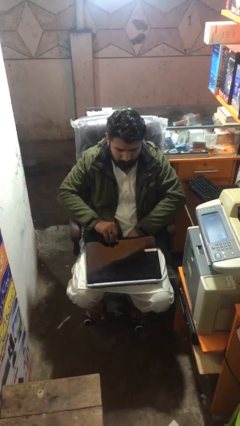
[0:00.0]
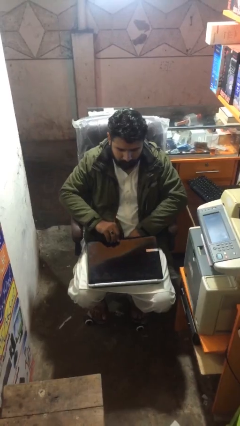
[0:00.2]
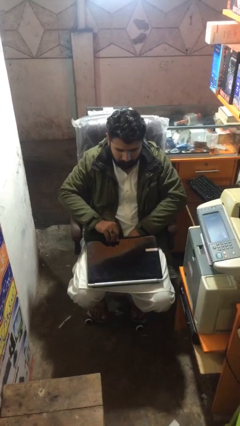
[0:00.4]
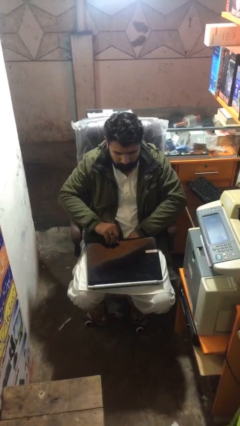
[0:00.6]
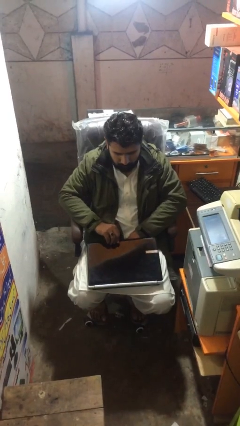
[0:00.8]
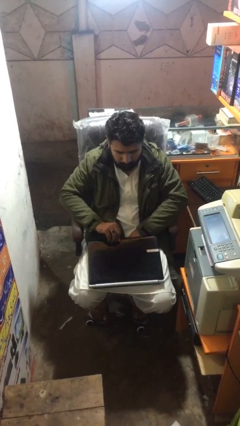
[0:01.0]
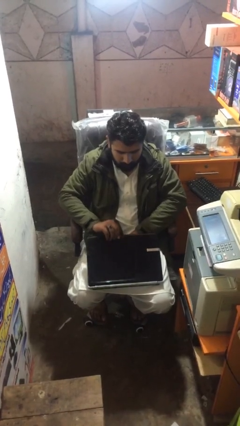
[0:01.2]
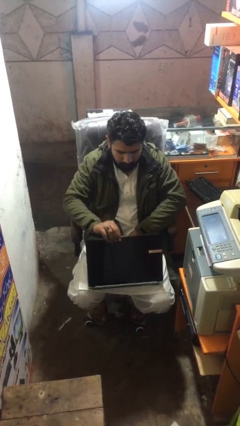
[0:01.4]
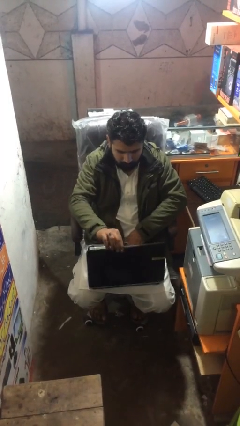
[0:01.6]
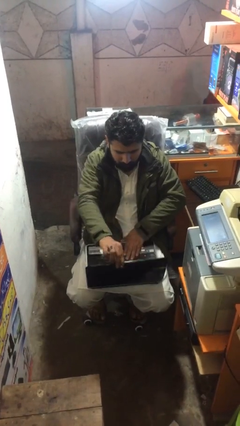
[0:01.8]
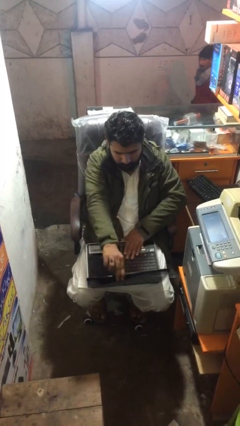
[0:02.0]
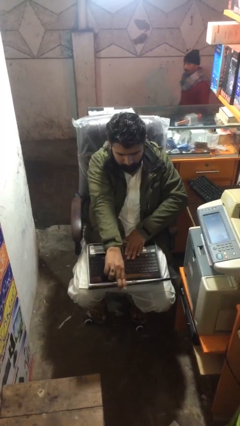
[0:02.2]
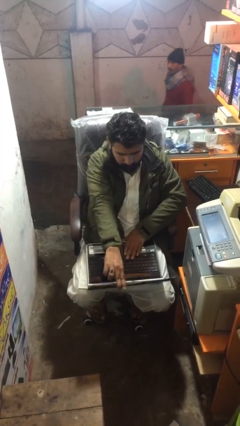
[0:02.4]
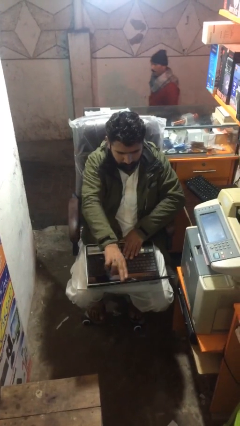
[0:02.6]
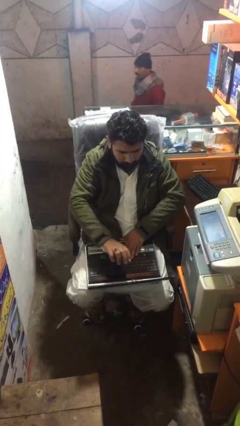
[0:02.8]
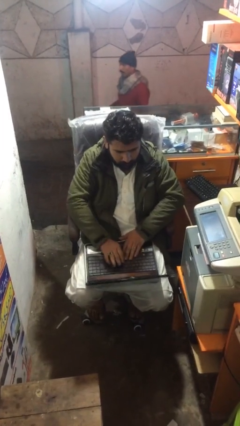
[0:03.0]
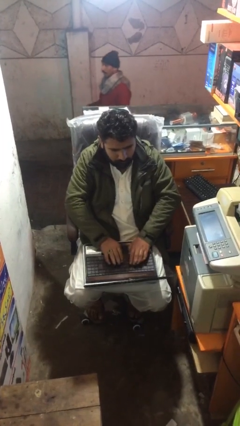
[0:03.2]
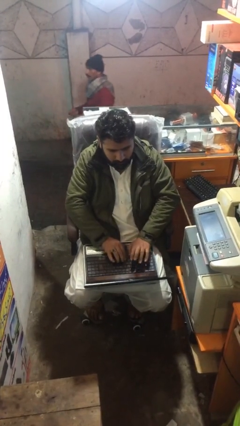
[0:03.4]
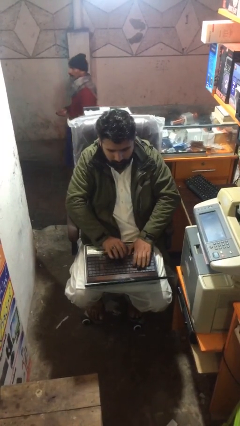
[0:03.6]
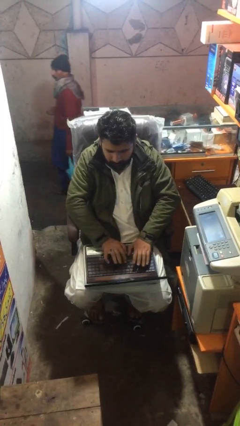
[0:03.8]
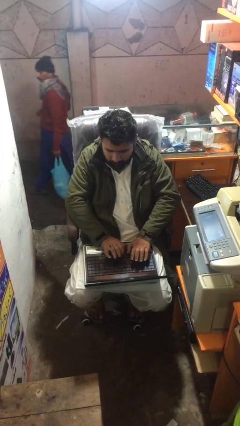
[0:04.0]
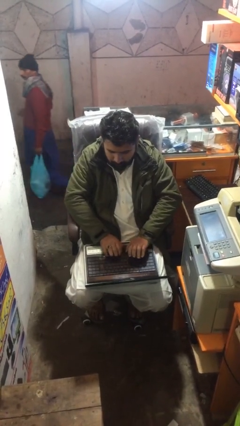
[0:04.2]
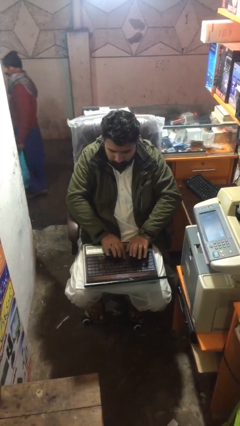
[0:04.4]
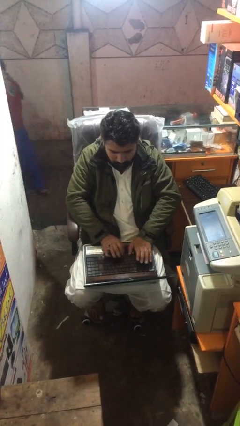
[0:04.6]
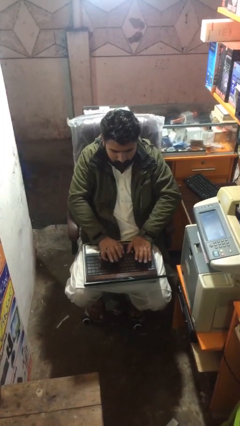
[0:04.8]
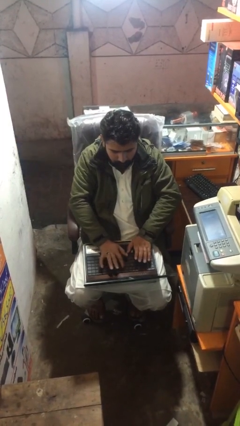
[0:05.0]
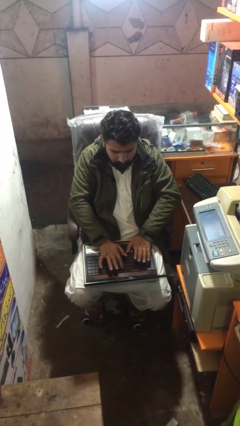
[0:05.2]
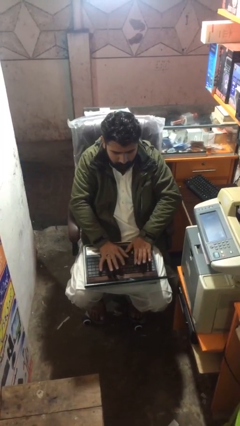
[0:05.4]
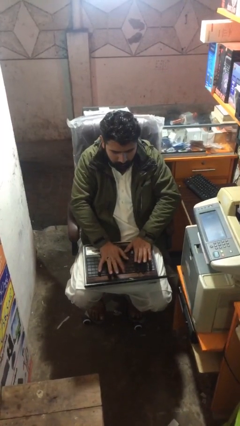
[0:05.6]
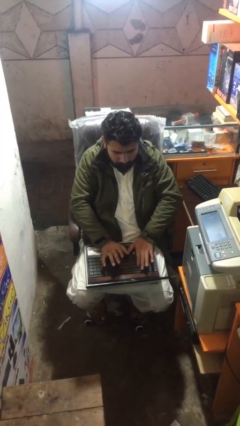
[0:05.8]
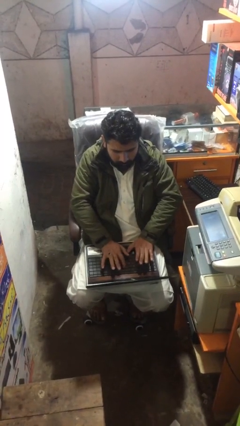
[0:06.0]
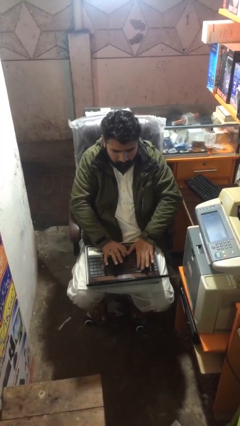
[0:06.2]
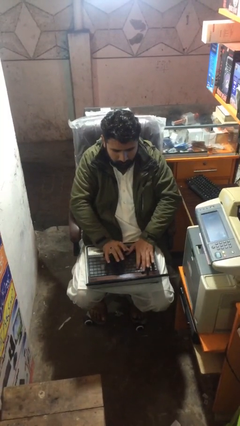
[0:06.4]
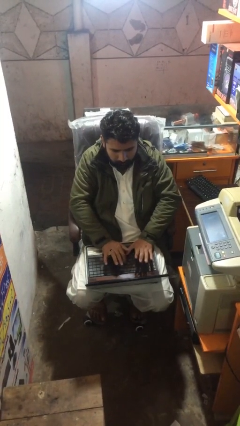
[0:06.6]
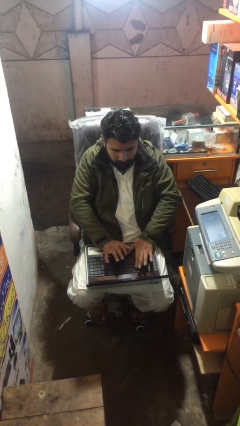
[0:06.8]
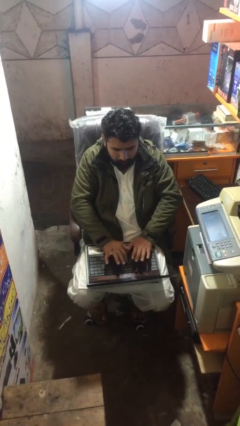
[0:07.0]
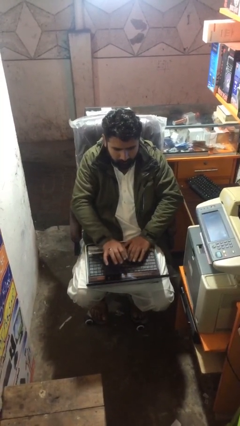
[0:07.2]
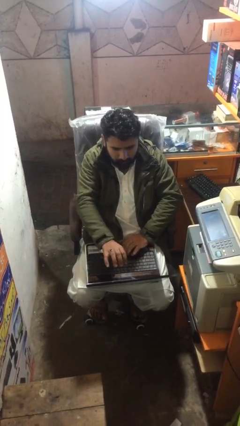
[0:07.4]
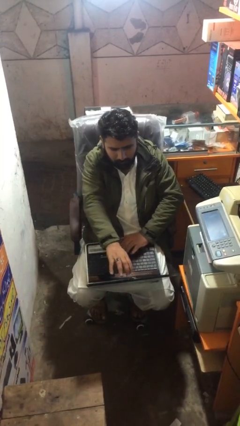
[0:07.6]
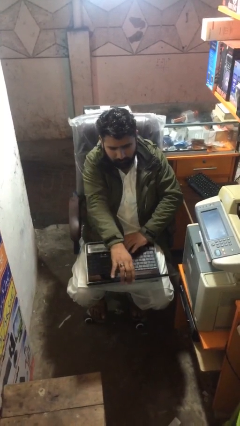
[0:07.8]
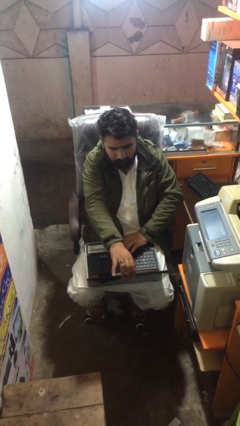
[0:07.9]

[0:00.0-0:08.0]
person interacts with laptop

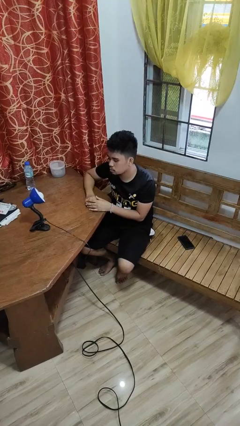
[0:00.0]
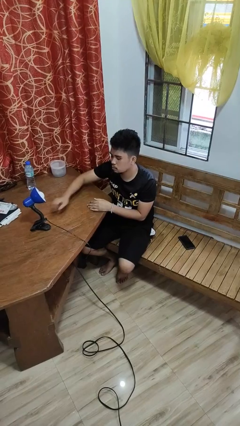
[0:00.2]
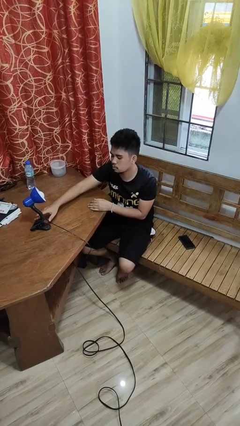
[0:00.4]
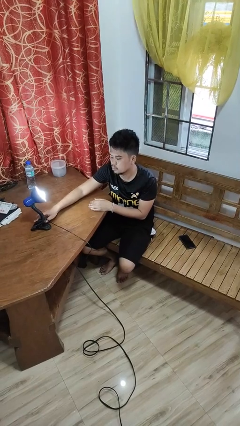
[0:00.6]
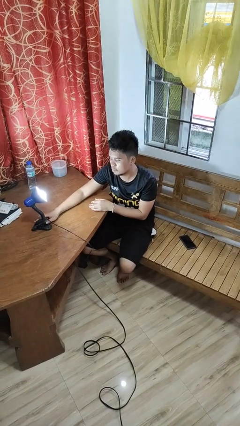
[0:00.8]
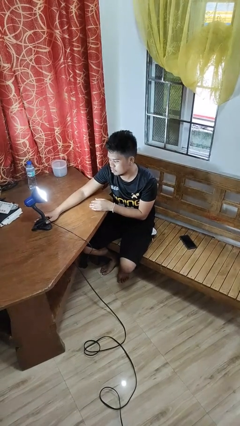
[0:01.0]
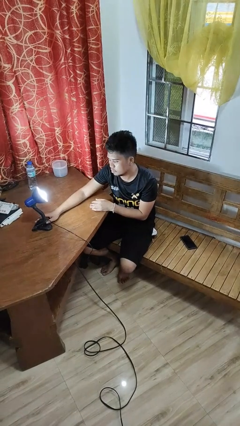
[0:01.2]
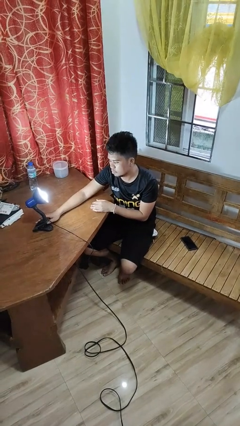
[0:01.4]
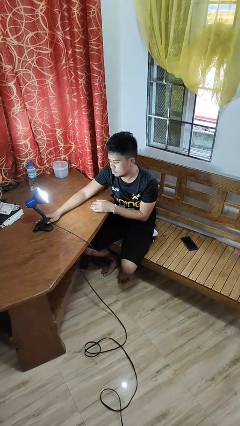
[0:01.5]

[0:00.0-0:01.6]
person turns on lamp

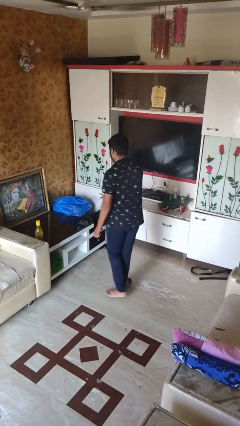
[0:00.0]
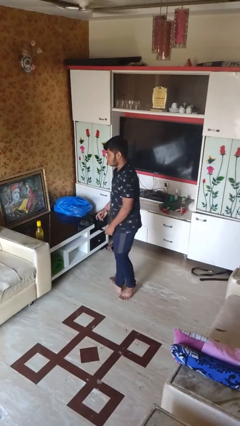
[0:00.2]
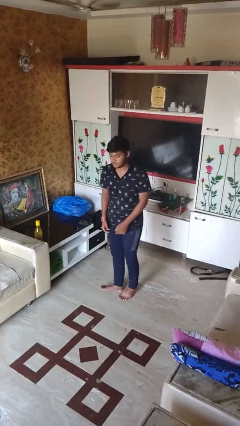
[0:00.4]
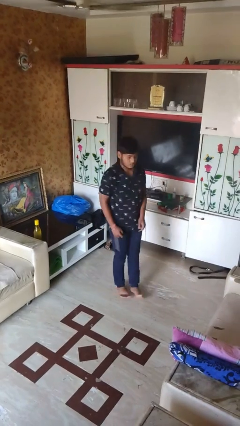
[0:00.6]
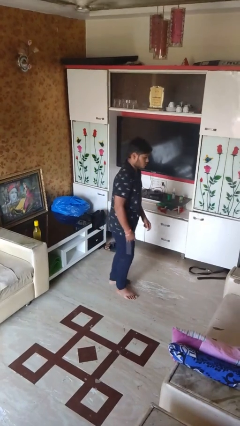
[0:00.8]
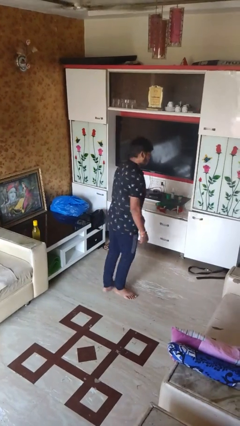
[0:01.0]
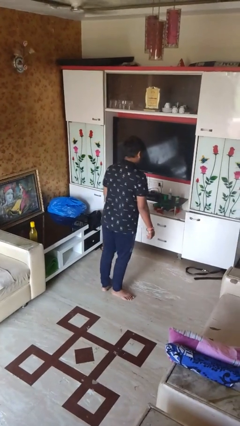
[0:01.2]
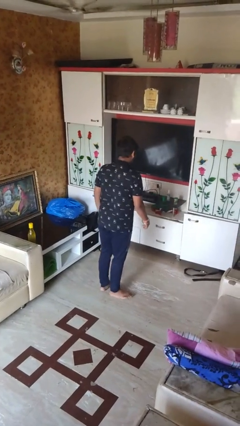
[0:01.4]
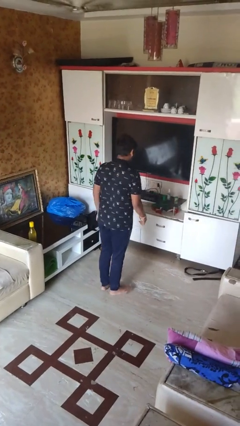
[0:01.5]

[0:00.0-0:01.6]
person twirls

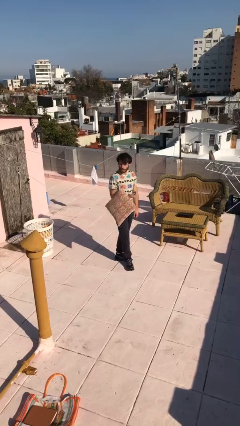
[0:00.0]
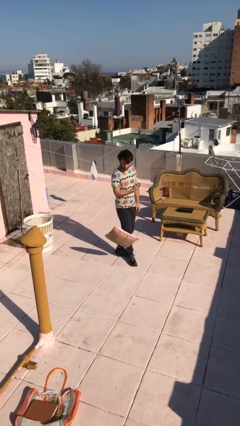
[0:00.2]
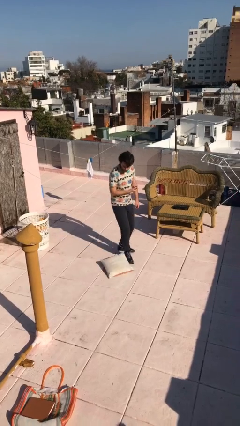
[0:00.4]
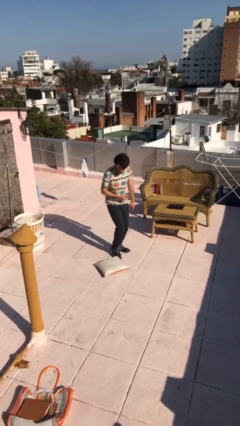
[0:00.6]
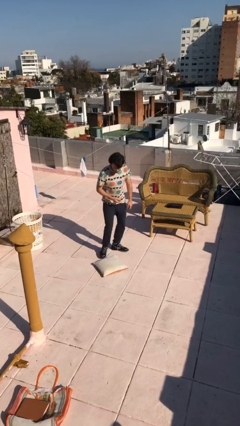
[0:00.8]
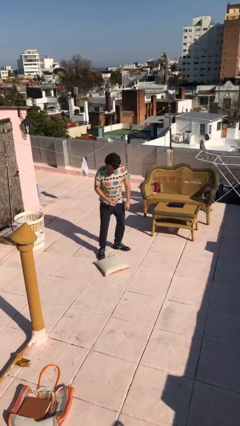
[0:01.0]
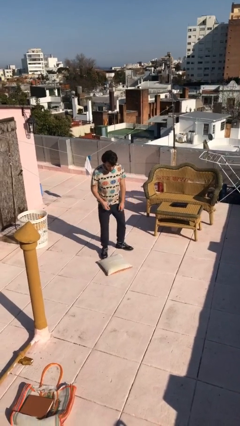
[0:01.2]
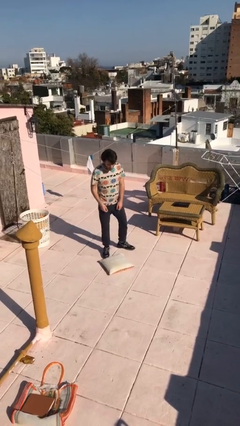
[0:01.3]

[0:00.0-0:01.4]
person drops object

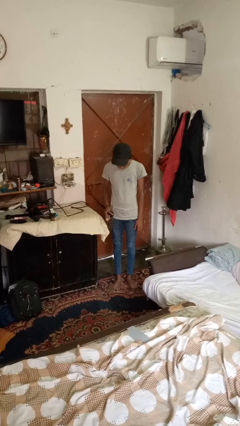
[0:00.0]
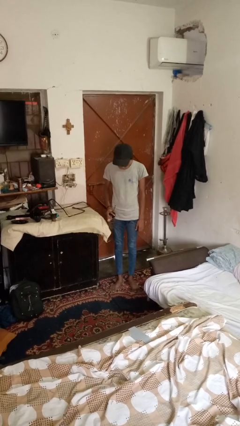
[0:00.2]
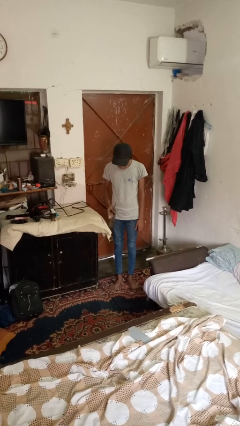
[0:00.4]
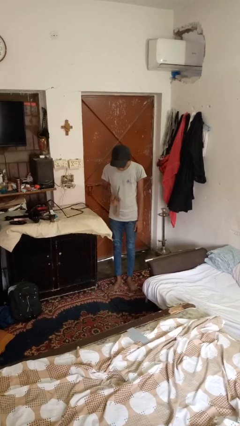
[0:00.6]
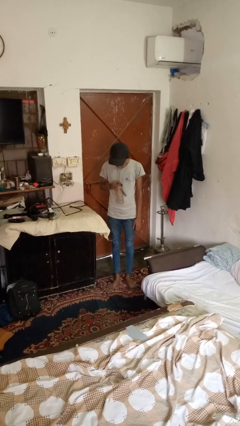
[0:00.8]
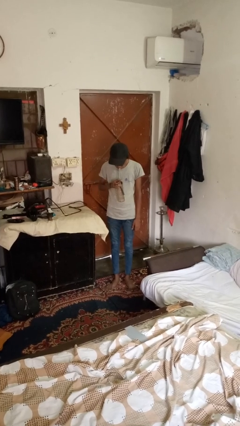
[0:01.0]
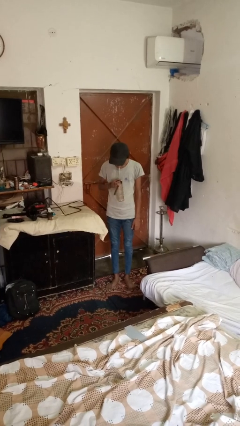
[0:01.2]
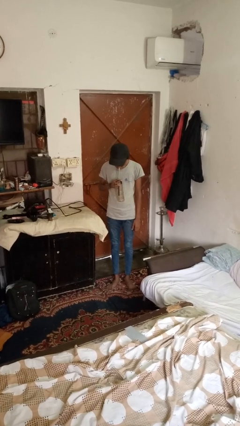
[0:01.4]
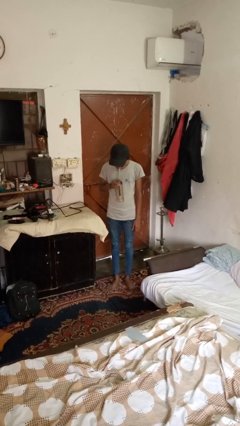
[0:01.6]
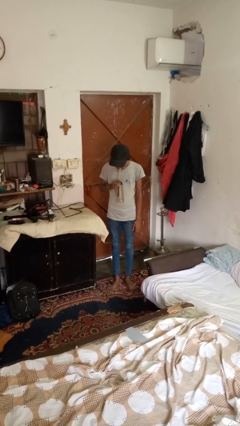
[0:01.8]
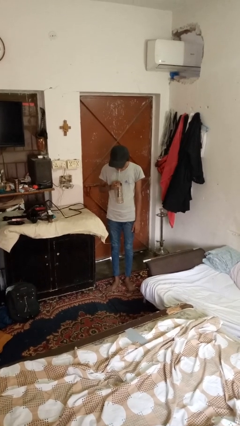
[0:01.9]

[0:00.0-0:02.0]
person drinks from straw

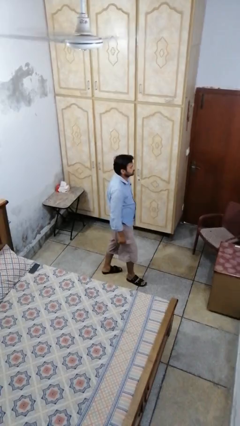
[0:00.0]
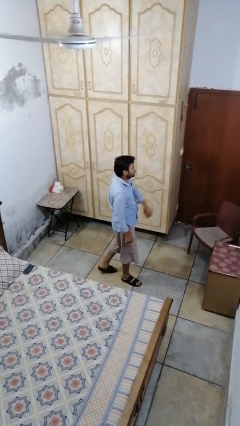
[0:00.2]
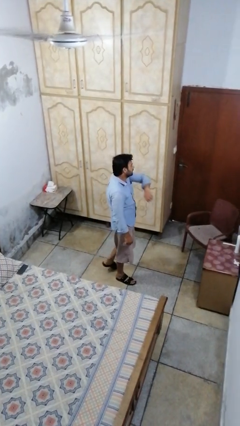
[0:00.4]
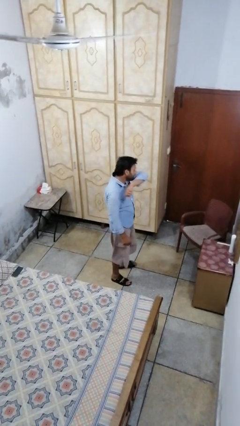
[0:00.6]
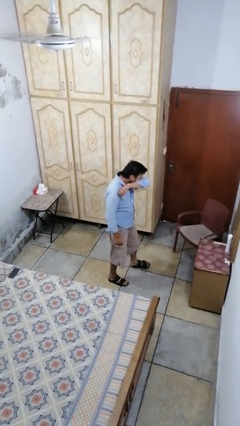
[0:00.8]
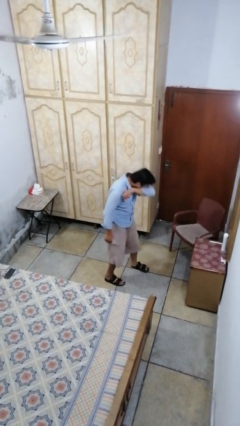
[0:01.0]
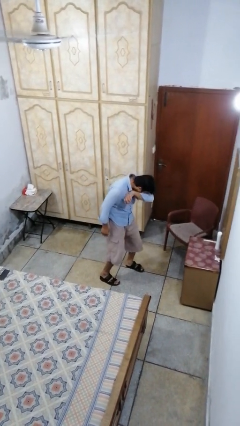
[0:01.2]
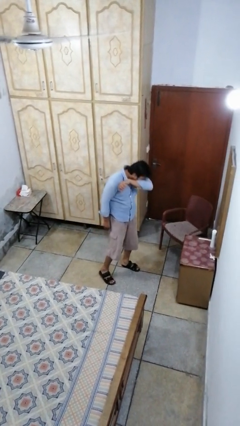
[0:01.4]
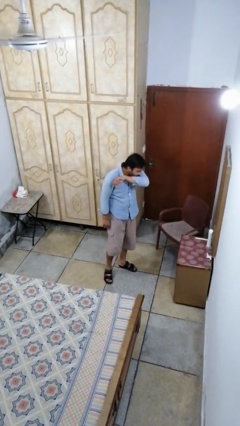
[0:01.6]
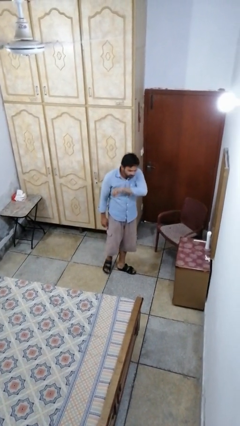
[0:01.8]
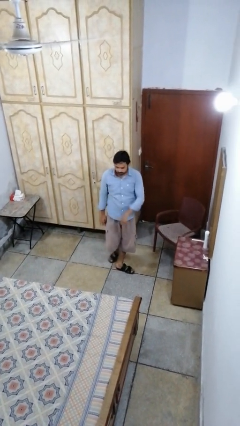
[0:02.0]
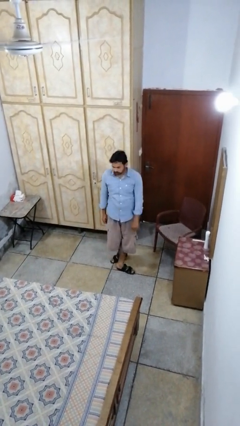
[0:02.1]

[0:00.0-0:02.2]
person sneezes into arm

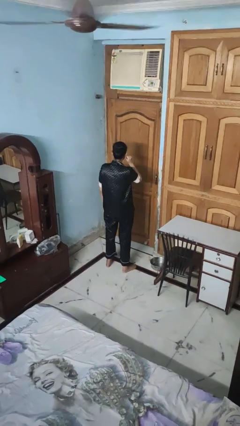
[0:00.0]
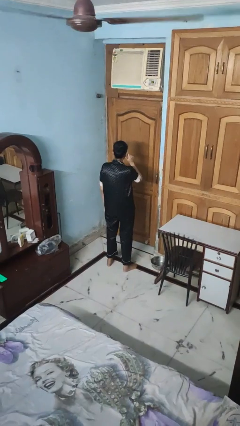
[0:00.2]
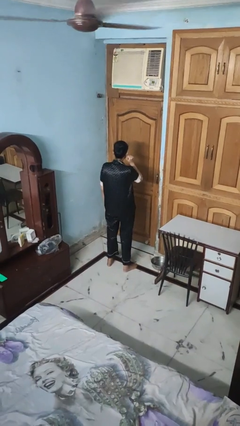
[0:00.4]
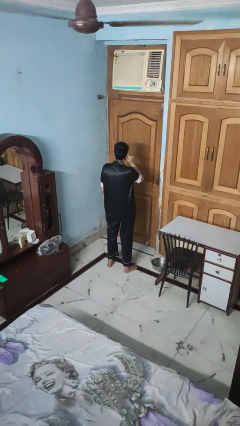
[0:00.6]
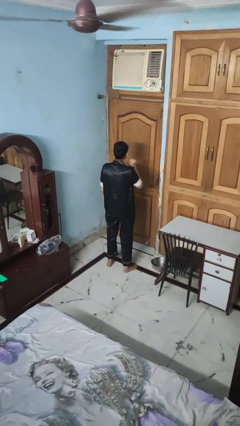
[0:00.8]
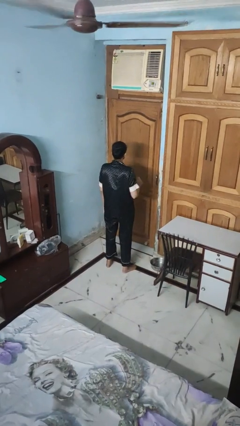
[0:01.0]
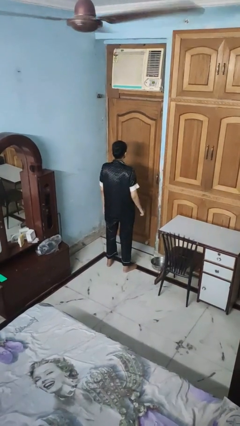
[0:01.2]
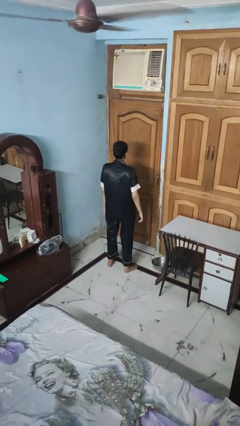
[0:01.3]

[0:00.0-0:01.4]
person touches earlobe
